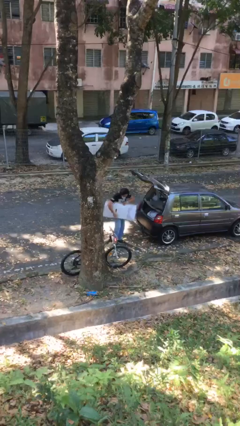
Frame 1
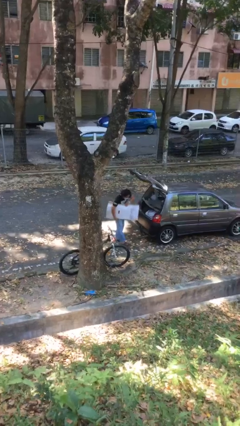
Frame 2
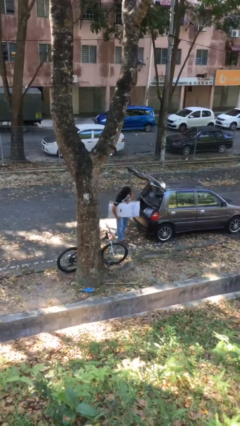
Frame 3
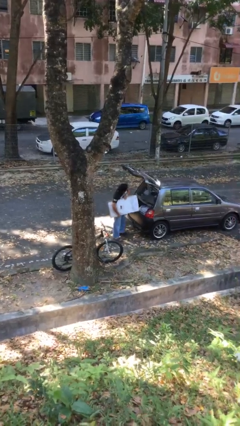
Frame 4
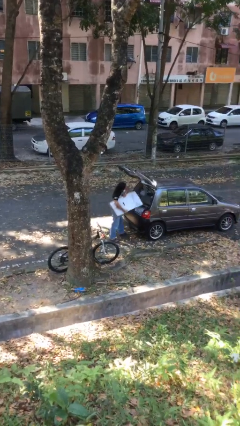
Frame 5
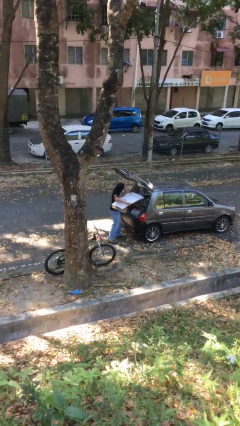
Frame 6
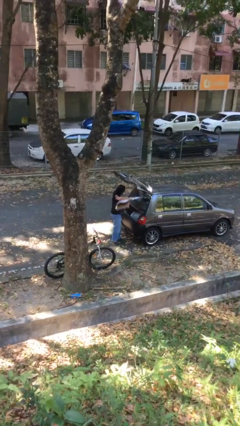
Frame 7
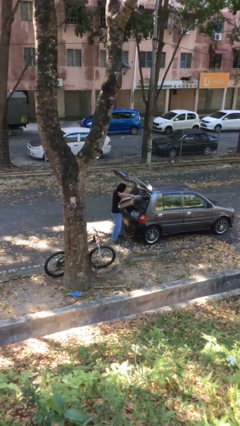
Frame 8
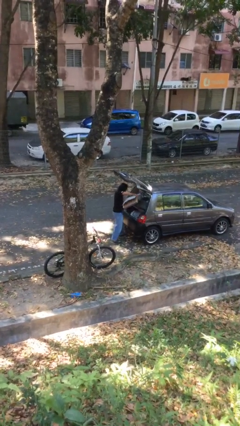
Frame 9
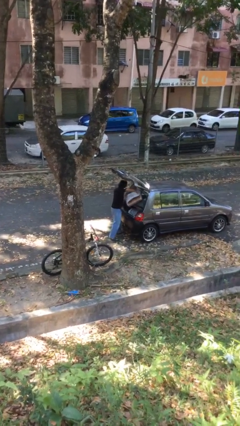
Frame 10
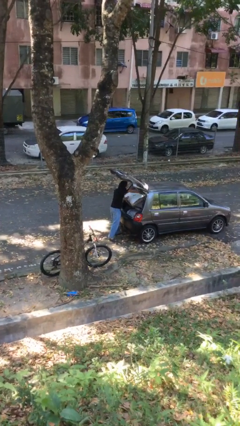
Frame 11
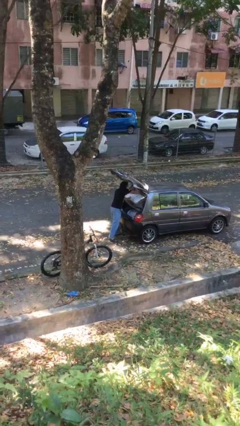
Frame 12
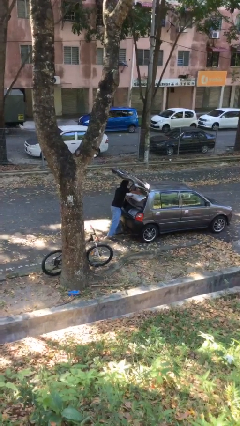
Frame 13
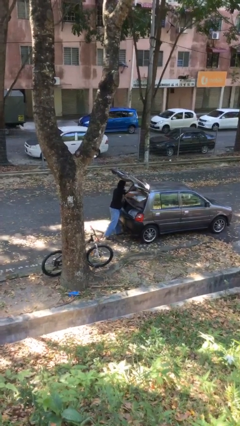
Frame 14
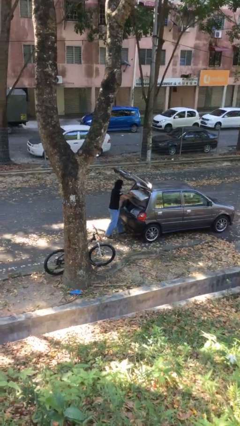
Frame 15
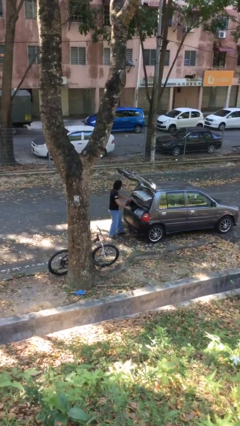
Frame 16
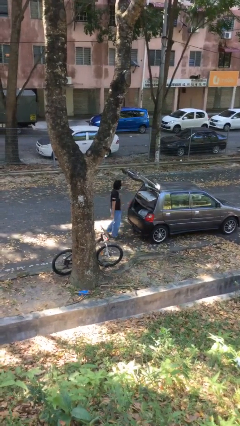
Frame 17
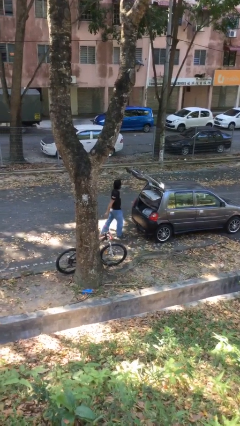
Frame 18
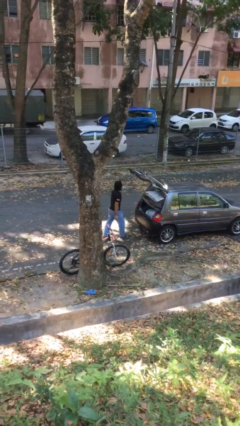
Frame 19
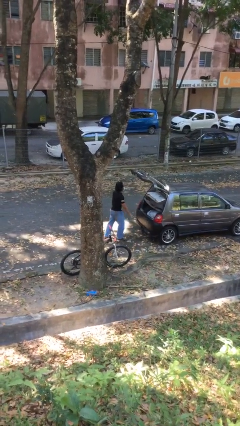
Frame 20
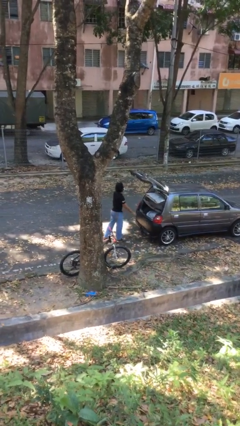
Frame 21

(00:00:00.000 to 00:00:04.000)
person loads car

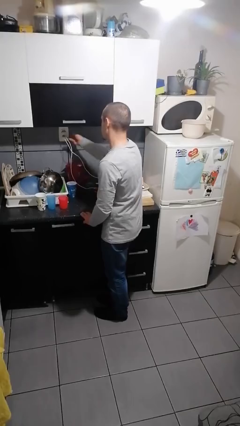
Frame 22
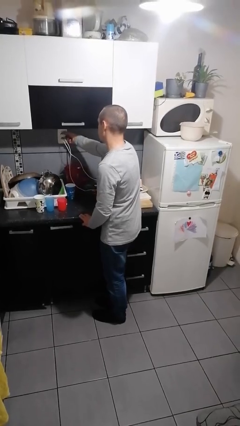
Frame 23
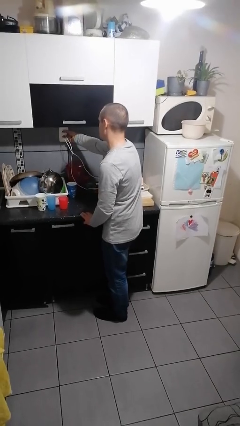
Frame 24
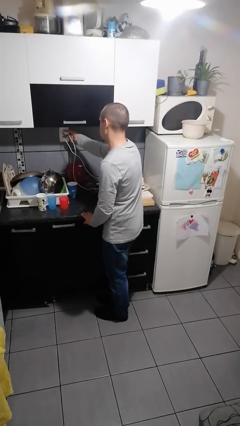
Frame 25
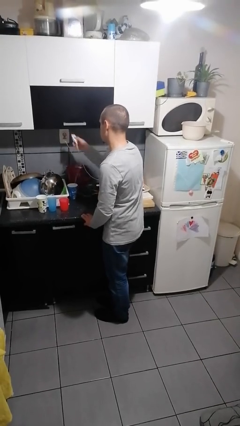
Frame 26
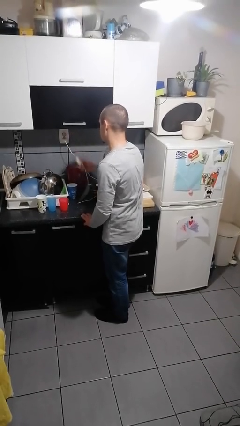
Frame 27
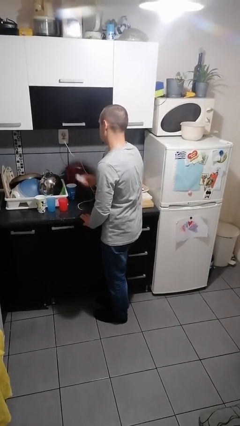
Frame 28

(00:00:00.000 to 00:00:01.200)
person unplugs from electrical socket

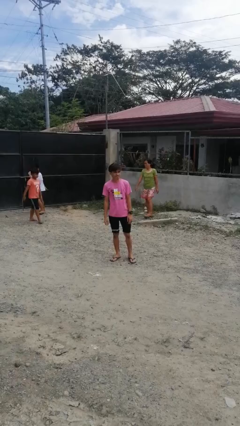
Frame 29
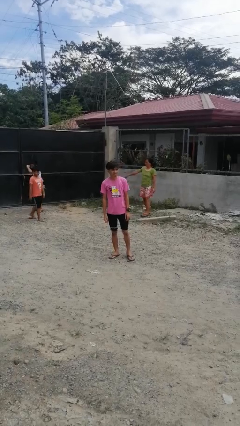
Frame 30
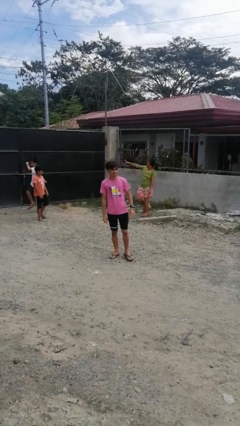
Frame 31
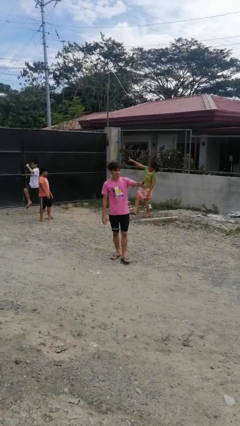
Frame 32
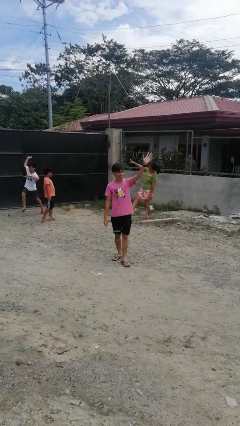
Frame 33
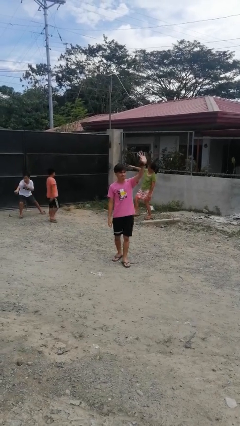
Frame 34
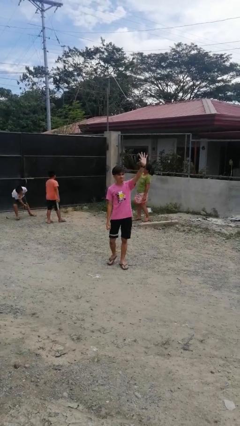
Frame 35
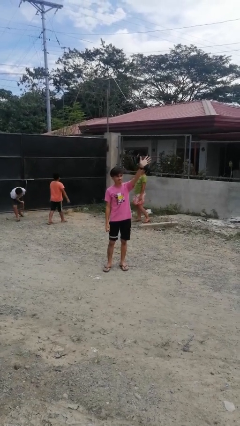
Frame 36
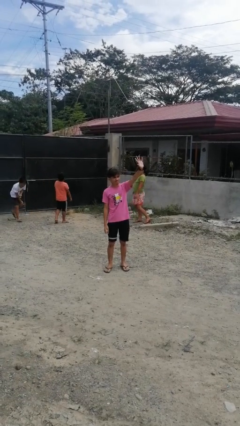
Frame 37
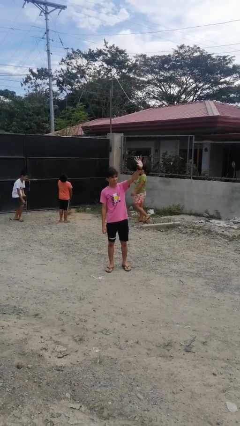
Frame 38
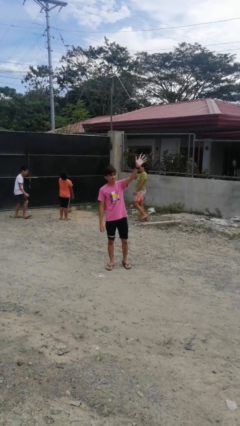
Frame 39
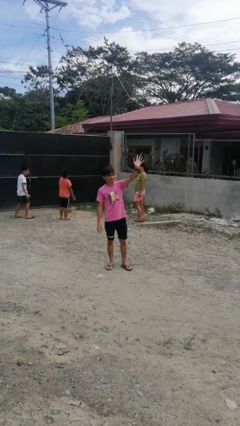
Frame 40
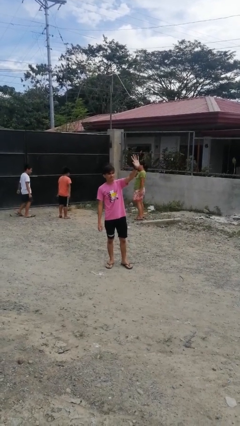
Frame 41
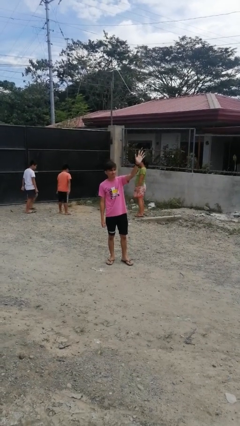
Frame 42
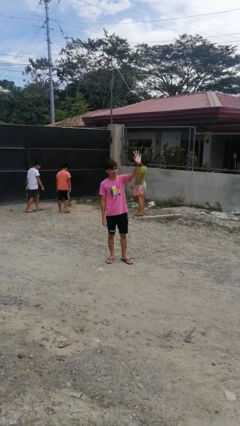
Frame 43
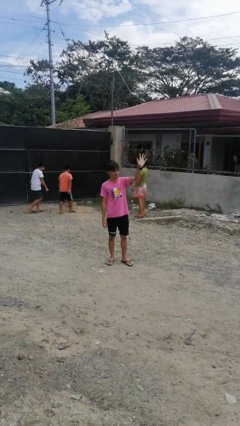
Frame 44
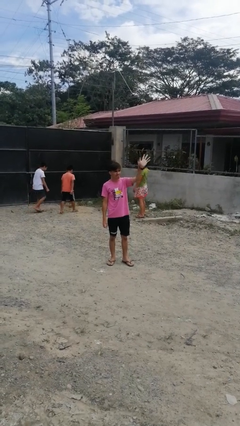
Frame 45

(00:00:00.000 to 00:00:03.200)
person waves at person

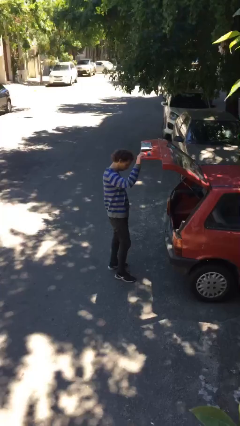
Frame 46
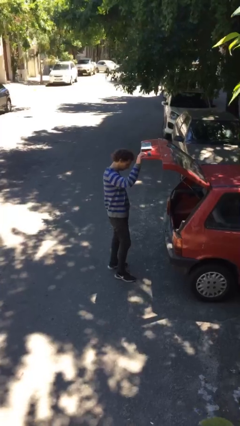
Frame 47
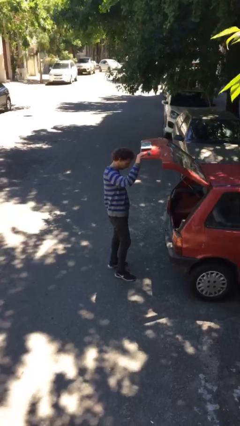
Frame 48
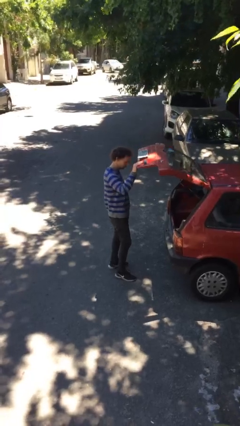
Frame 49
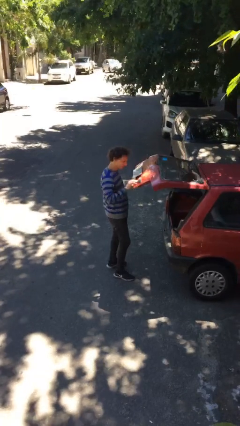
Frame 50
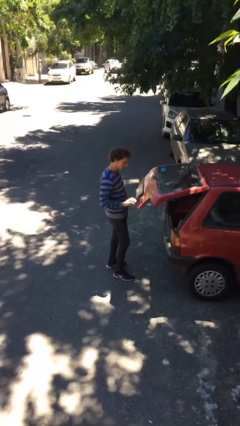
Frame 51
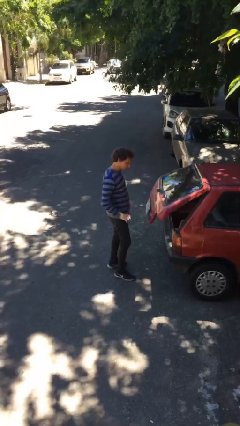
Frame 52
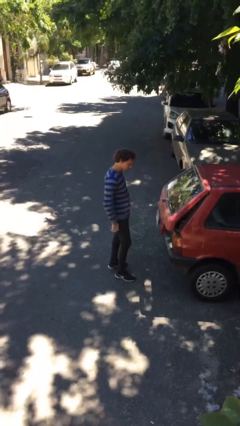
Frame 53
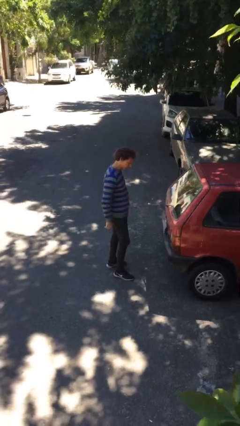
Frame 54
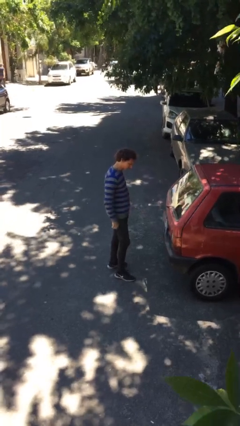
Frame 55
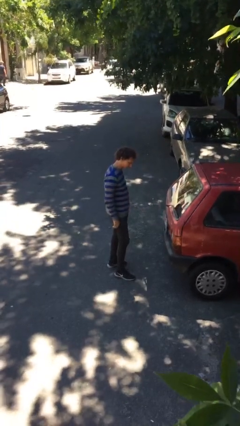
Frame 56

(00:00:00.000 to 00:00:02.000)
person closes car trunk

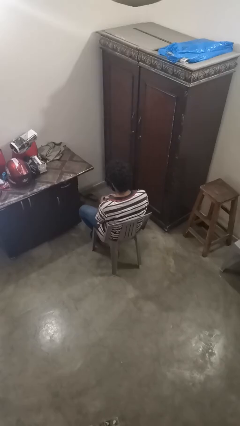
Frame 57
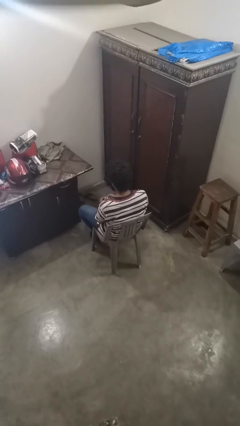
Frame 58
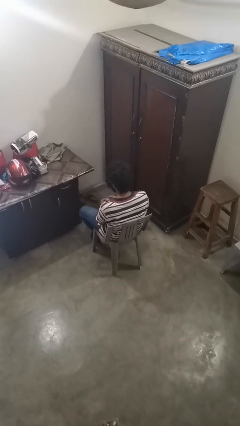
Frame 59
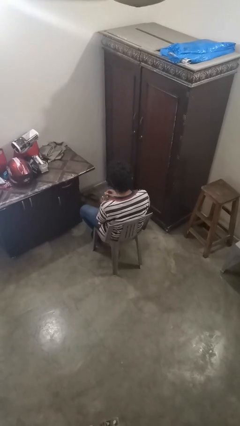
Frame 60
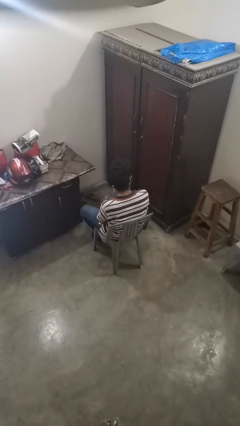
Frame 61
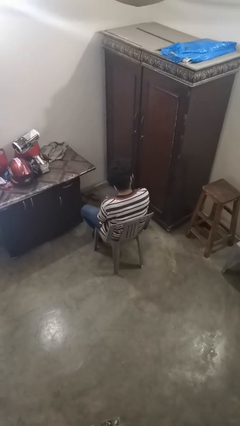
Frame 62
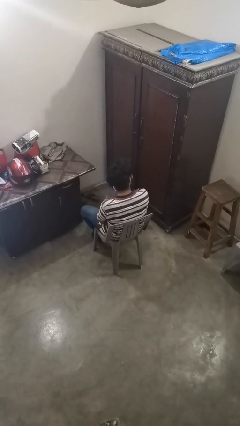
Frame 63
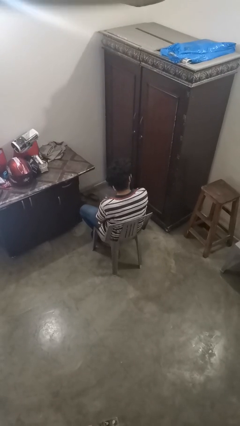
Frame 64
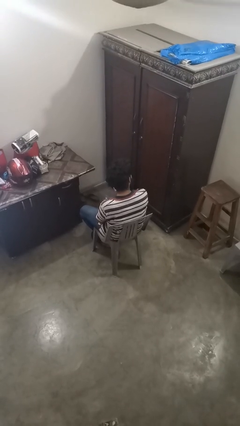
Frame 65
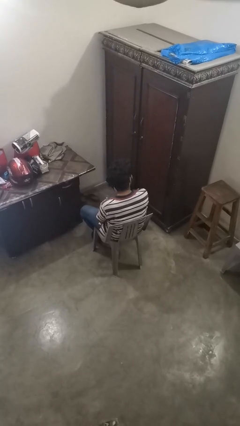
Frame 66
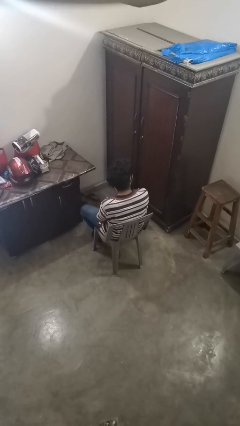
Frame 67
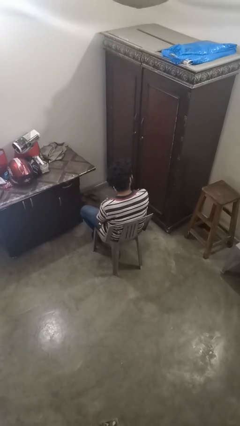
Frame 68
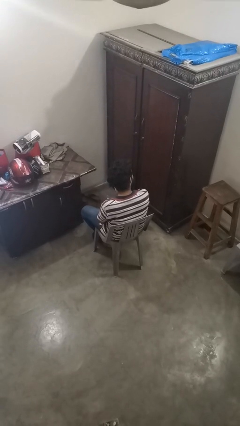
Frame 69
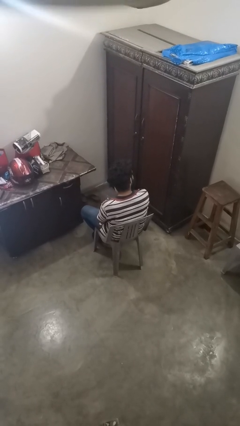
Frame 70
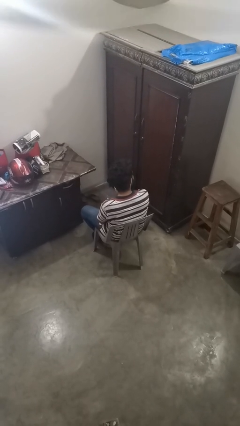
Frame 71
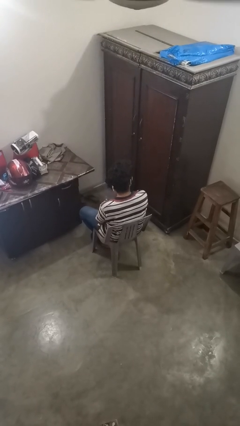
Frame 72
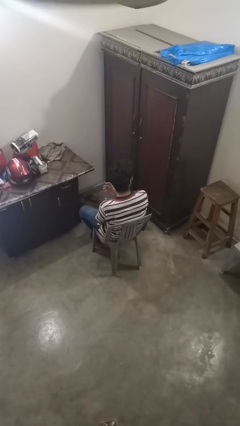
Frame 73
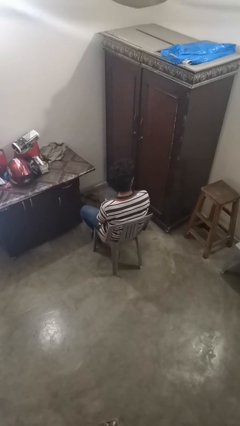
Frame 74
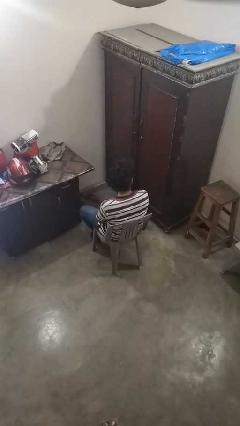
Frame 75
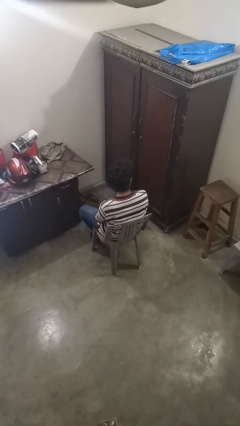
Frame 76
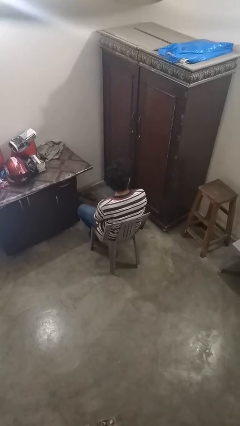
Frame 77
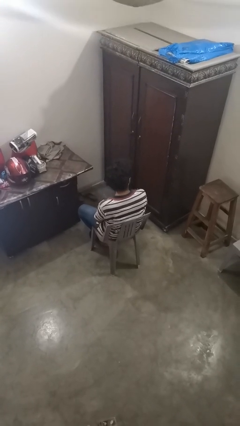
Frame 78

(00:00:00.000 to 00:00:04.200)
person puts on earrings

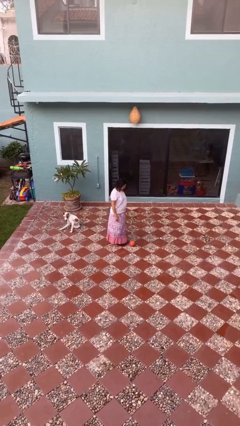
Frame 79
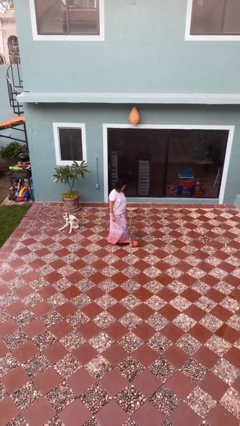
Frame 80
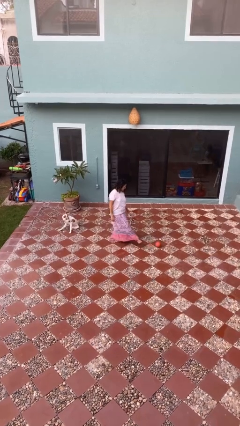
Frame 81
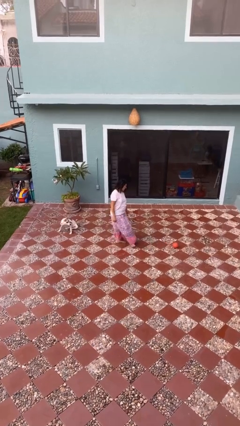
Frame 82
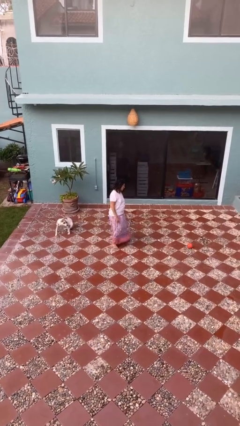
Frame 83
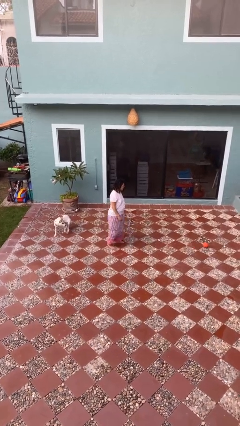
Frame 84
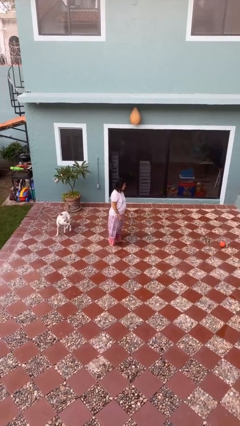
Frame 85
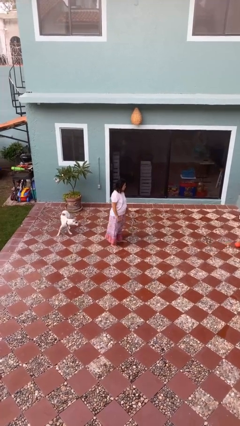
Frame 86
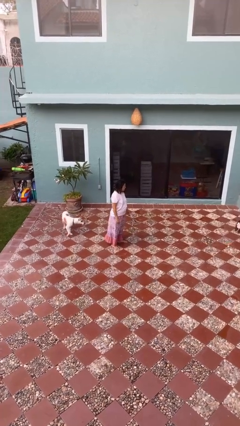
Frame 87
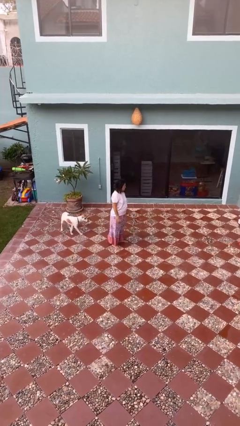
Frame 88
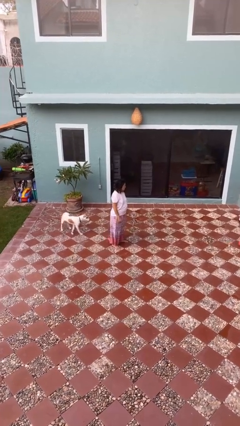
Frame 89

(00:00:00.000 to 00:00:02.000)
person kicks object to person

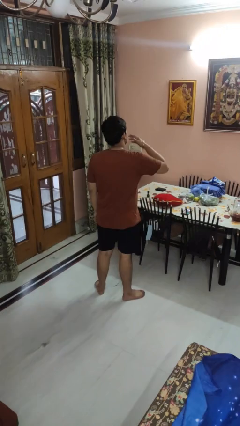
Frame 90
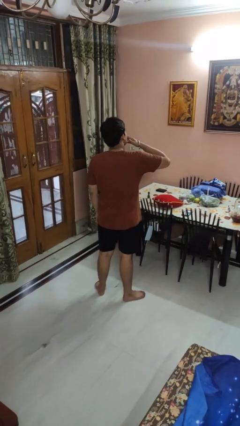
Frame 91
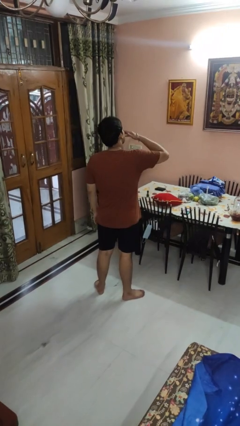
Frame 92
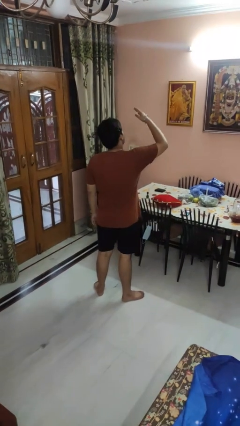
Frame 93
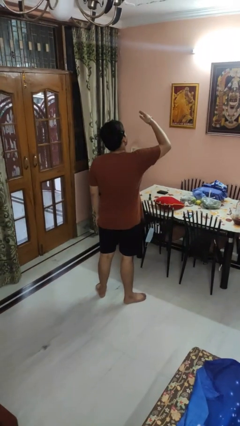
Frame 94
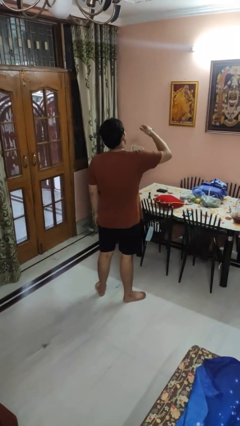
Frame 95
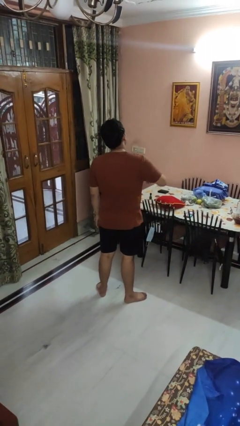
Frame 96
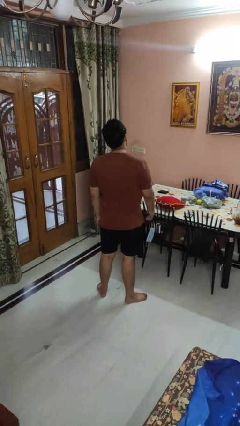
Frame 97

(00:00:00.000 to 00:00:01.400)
person gestures blow kiss
